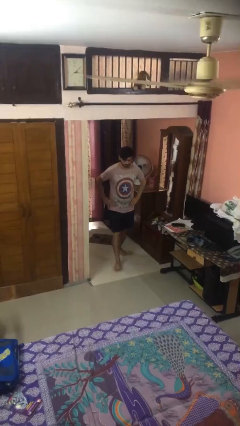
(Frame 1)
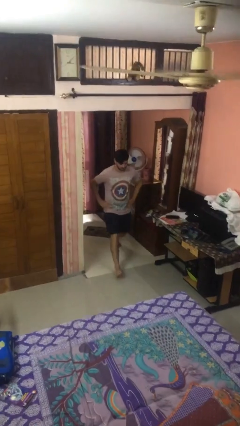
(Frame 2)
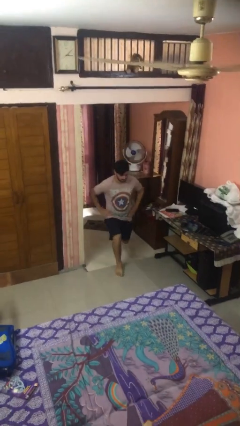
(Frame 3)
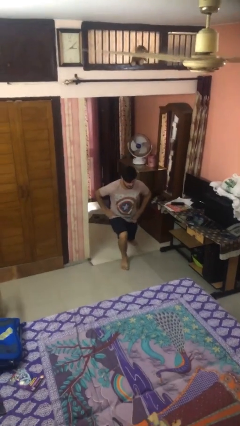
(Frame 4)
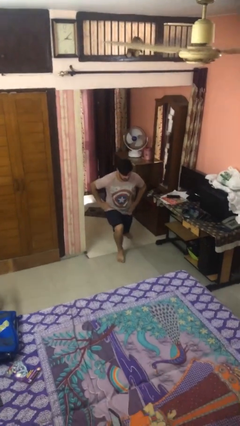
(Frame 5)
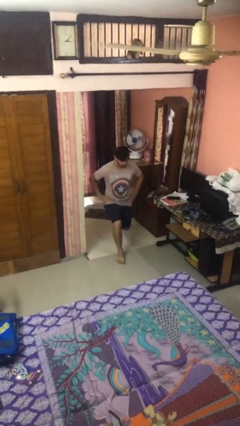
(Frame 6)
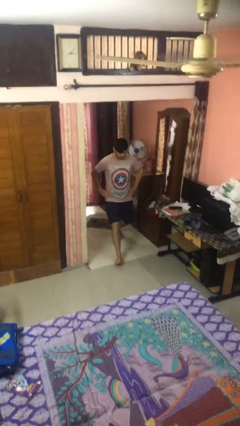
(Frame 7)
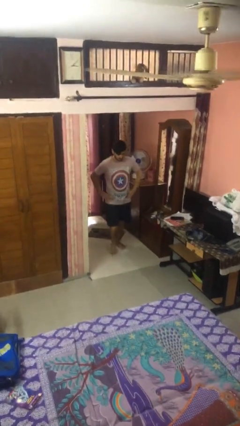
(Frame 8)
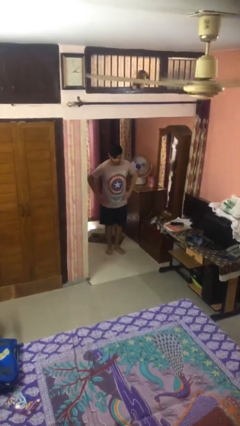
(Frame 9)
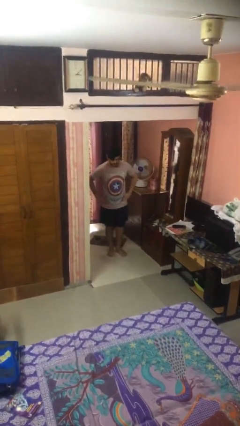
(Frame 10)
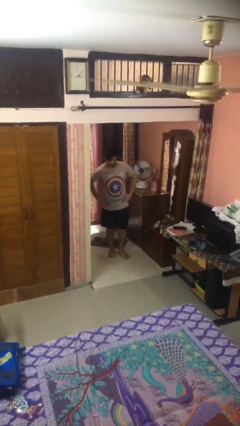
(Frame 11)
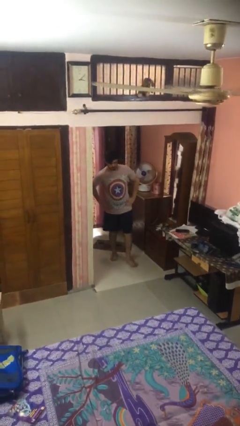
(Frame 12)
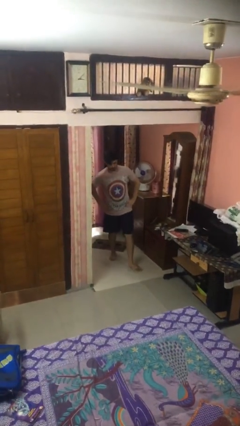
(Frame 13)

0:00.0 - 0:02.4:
person exercises with lunges

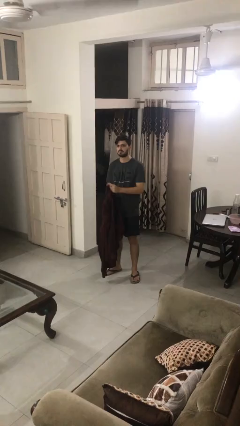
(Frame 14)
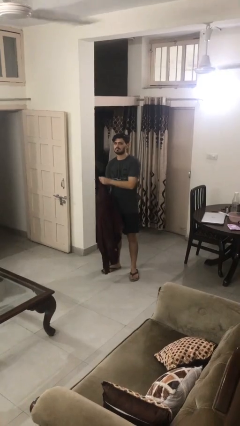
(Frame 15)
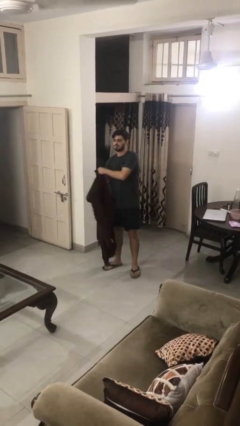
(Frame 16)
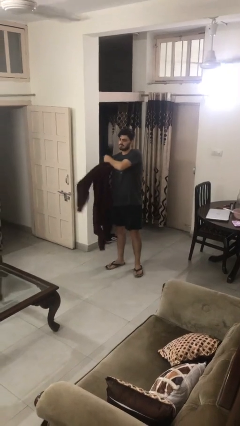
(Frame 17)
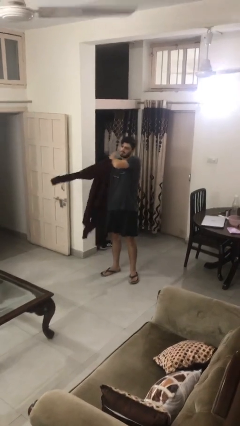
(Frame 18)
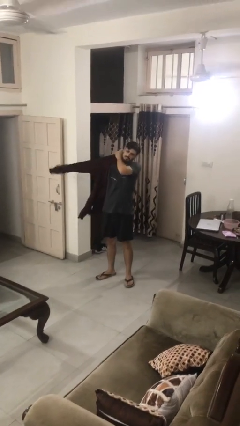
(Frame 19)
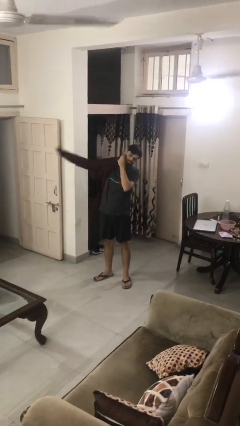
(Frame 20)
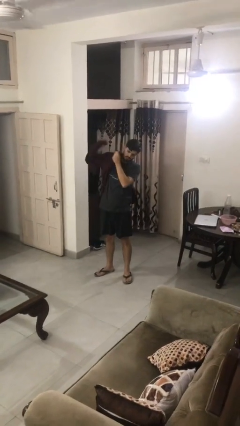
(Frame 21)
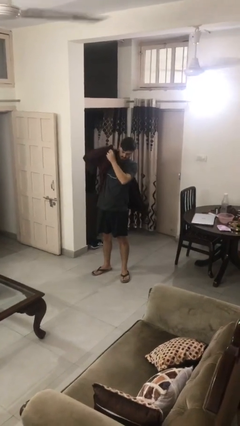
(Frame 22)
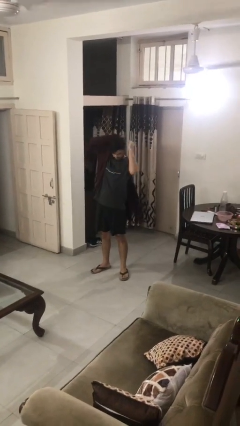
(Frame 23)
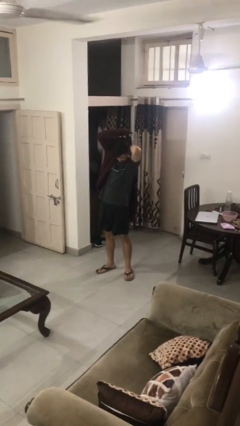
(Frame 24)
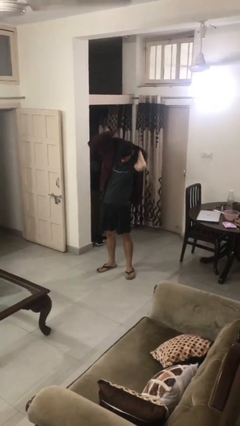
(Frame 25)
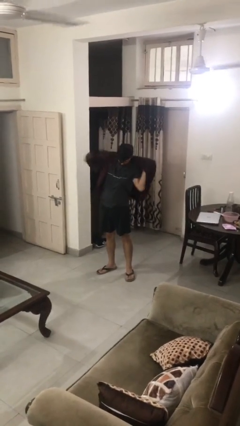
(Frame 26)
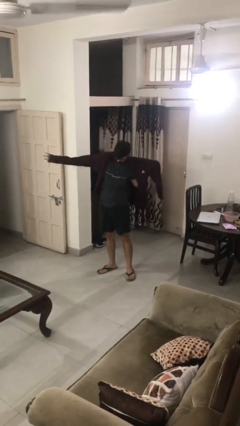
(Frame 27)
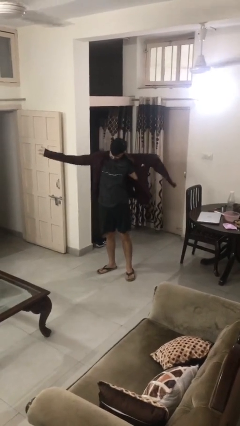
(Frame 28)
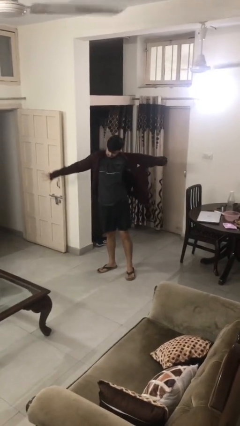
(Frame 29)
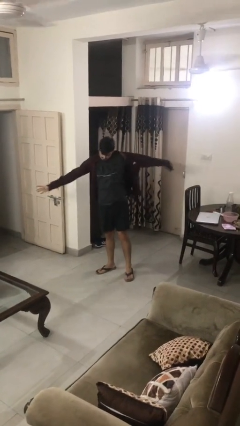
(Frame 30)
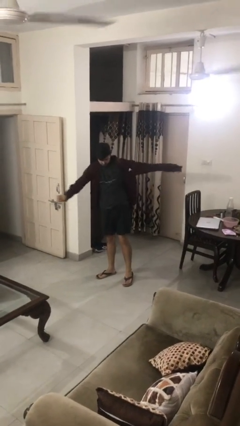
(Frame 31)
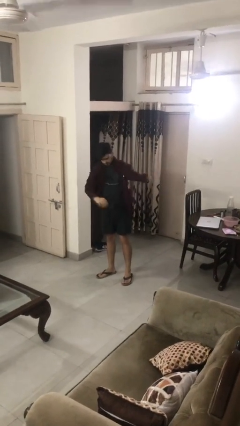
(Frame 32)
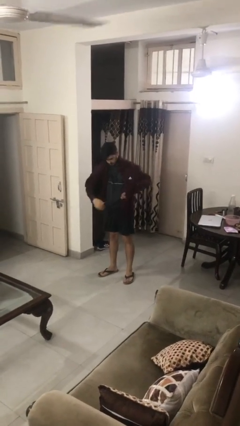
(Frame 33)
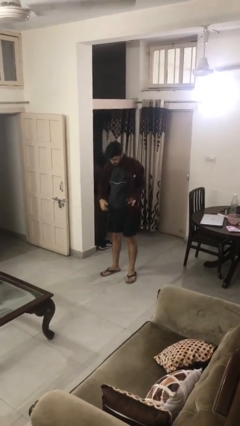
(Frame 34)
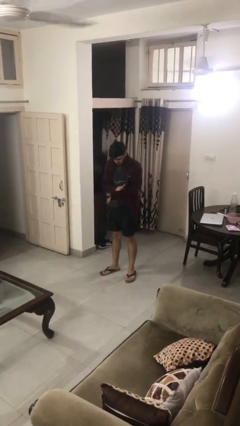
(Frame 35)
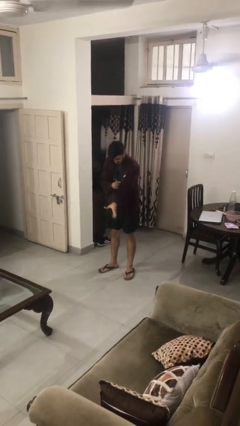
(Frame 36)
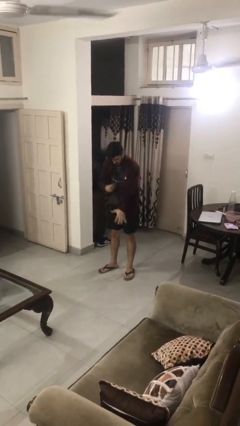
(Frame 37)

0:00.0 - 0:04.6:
person puts on jacket

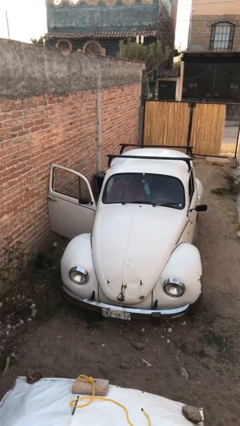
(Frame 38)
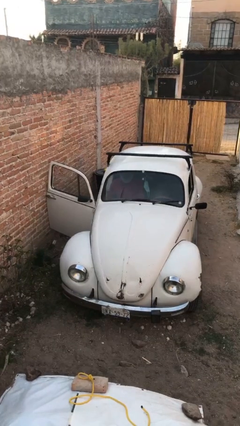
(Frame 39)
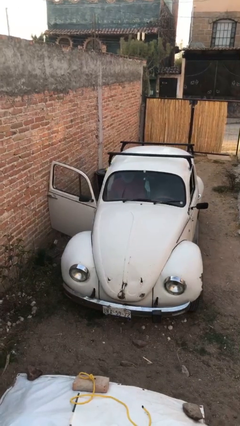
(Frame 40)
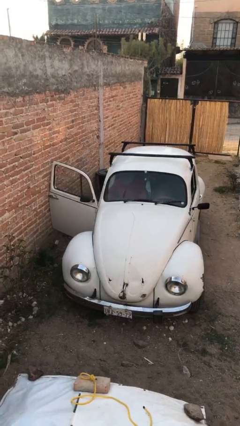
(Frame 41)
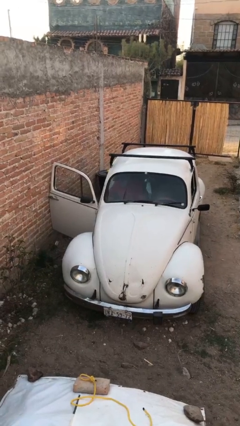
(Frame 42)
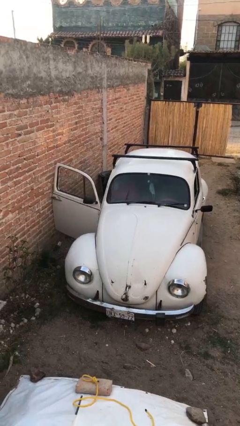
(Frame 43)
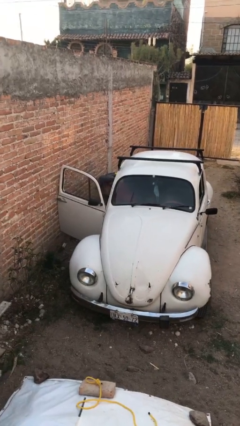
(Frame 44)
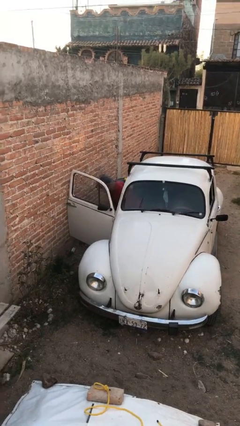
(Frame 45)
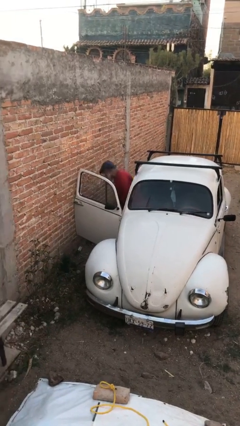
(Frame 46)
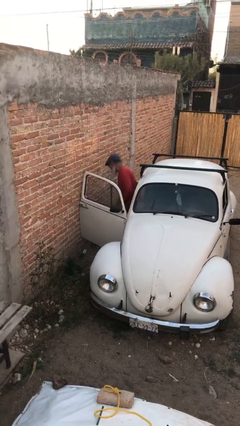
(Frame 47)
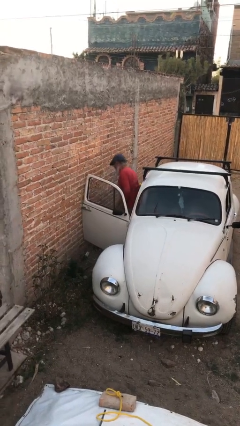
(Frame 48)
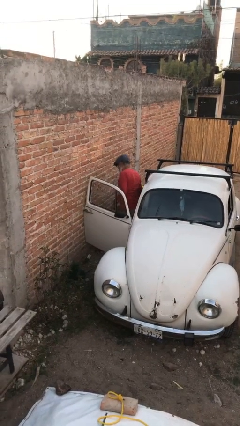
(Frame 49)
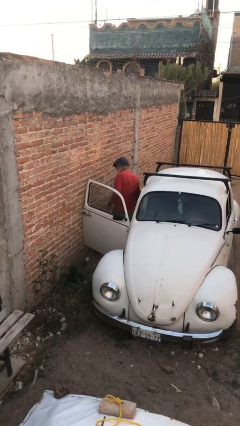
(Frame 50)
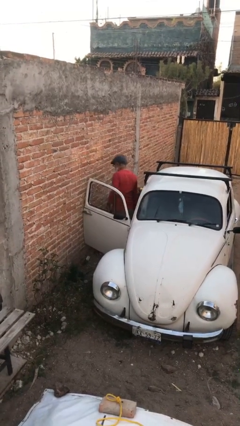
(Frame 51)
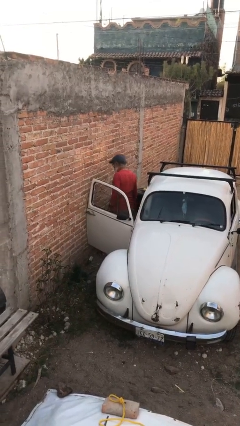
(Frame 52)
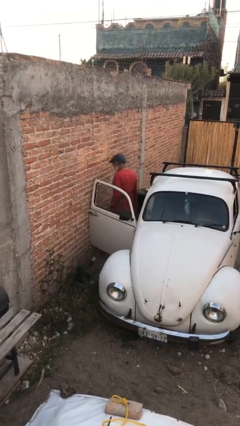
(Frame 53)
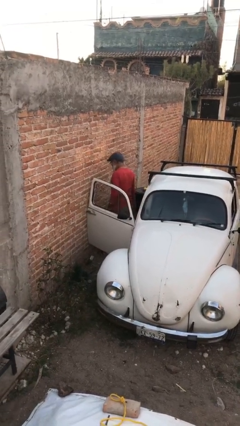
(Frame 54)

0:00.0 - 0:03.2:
person exits car

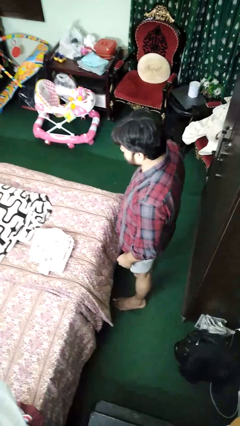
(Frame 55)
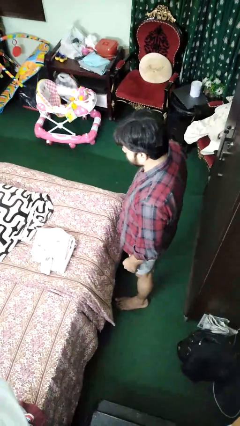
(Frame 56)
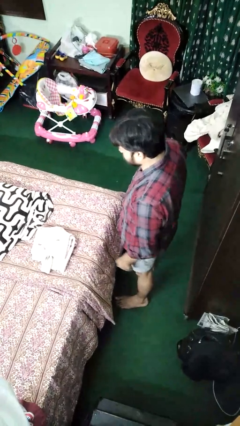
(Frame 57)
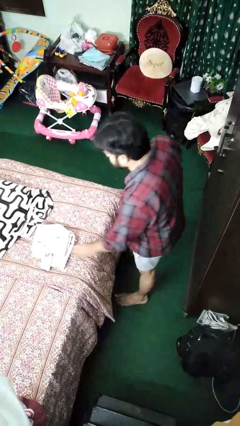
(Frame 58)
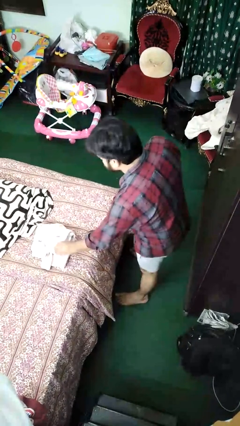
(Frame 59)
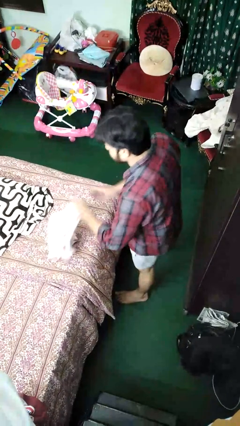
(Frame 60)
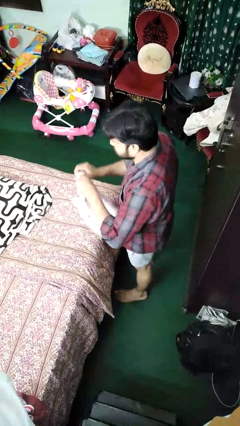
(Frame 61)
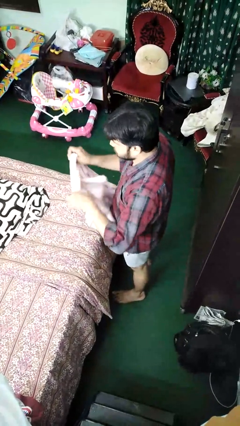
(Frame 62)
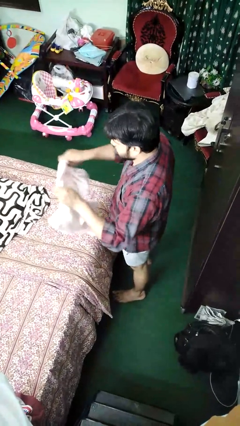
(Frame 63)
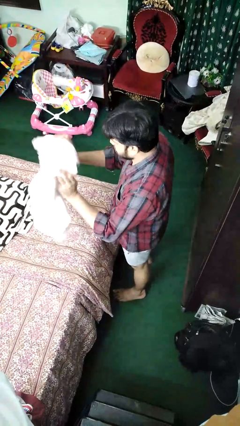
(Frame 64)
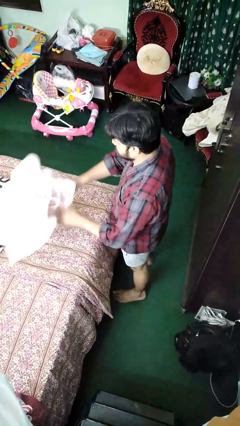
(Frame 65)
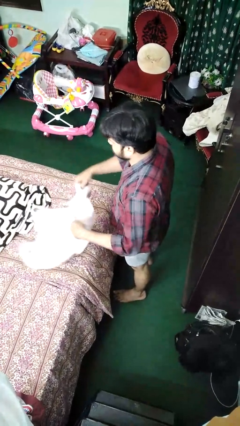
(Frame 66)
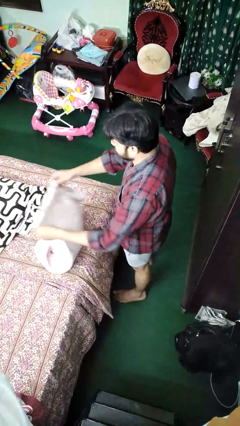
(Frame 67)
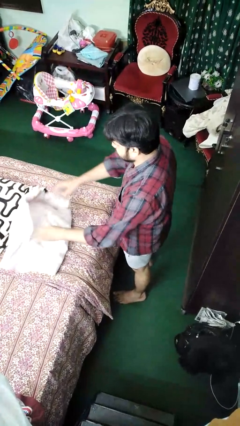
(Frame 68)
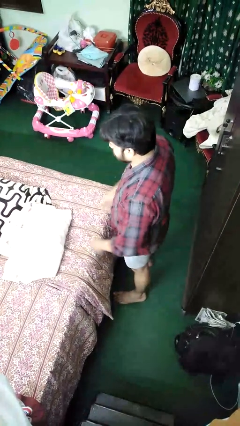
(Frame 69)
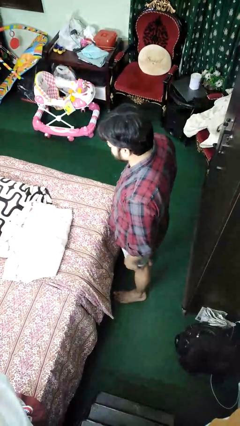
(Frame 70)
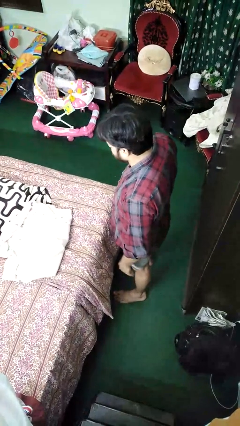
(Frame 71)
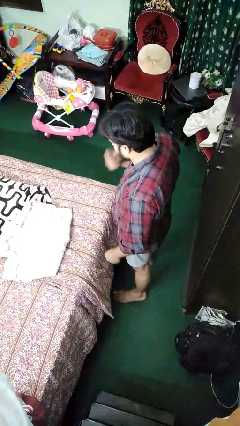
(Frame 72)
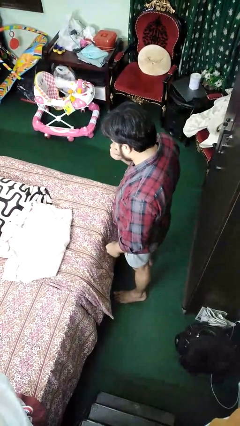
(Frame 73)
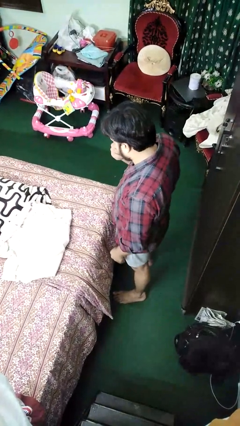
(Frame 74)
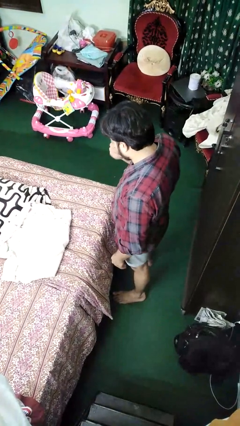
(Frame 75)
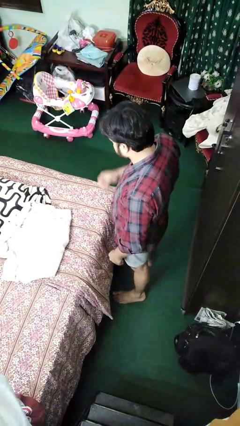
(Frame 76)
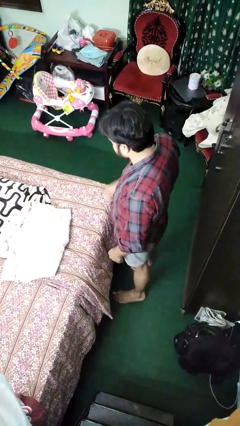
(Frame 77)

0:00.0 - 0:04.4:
person unfolds blanket

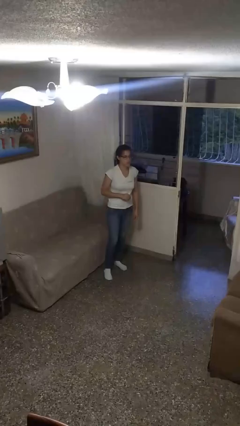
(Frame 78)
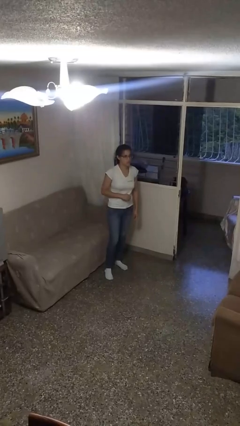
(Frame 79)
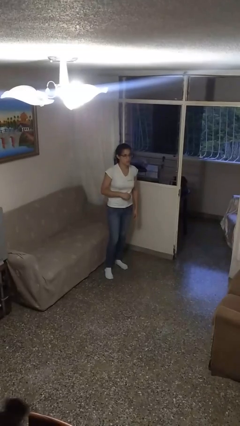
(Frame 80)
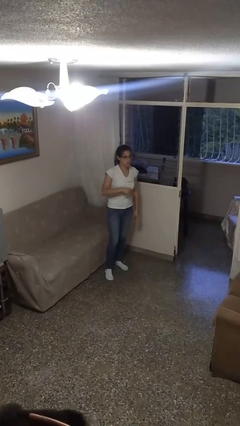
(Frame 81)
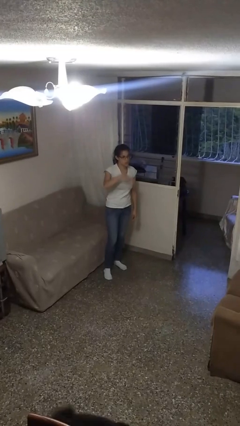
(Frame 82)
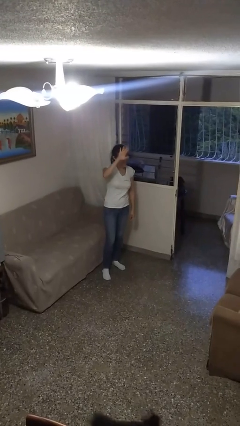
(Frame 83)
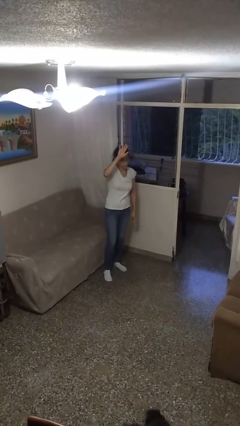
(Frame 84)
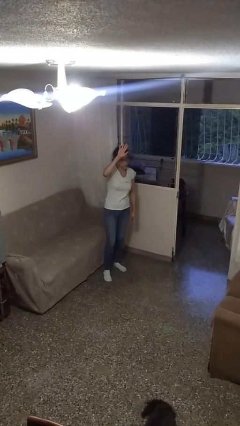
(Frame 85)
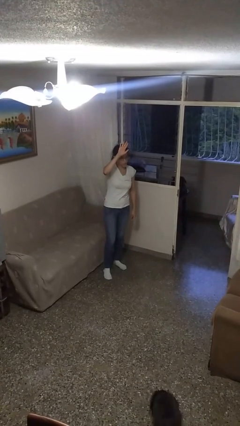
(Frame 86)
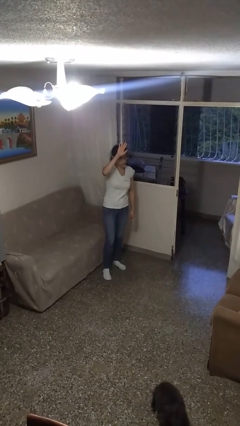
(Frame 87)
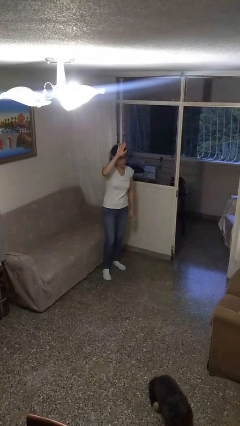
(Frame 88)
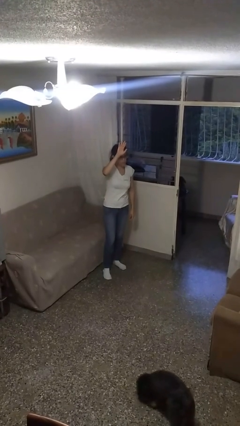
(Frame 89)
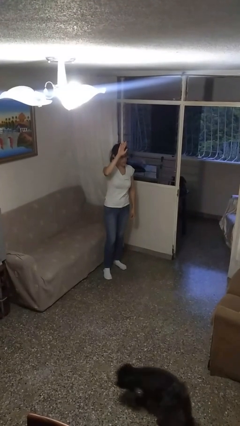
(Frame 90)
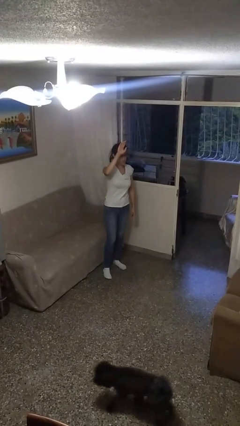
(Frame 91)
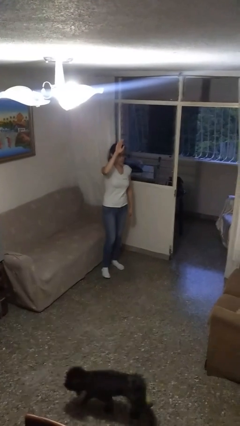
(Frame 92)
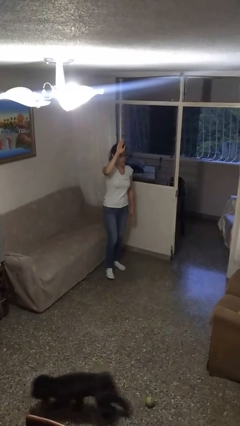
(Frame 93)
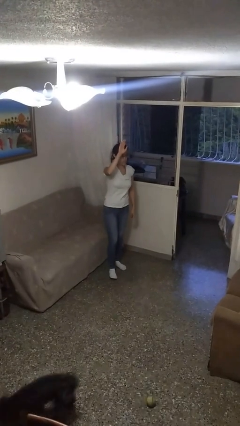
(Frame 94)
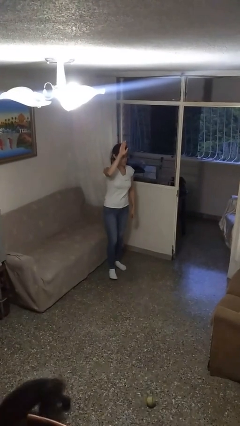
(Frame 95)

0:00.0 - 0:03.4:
person gestures swipe up
